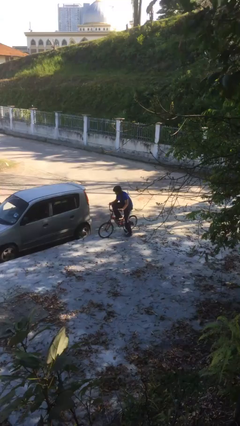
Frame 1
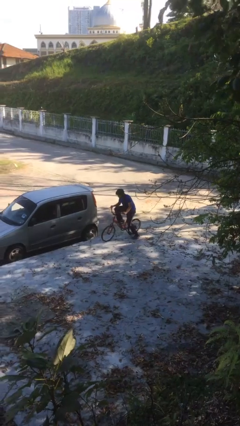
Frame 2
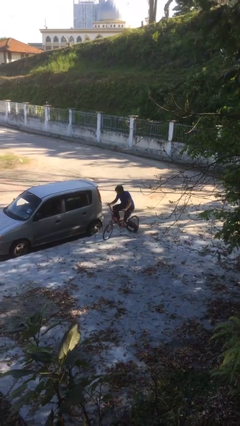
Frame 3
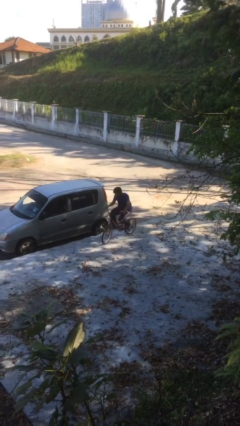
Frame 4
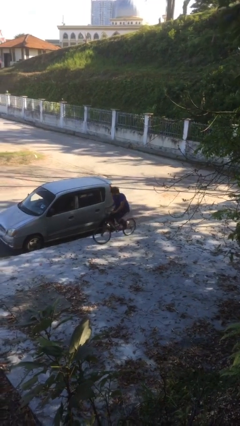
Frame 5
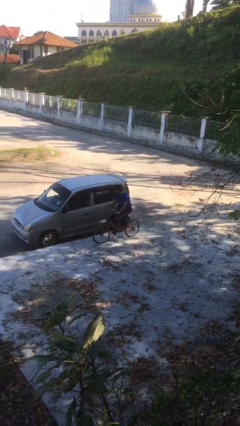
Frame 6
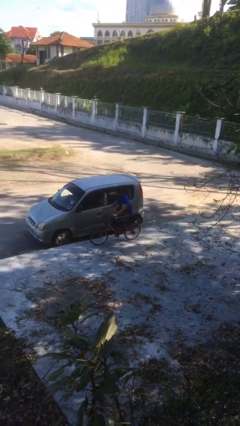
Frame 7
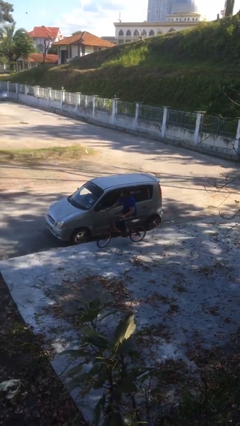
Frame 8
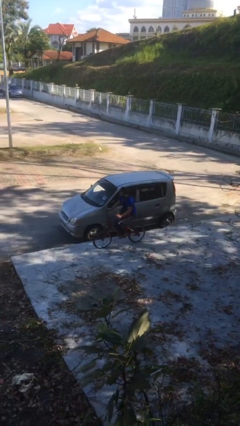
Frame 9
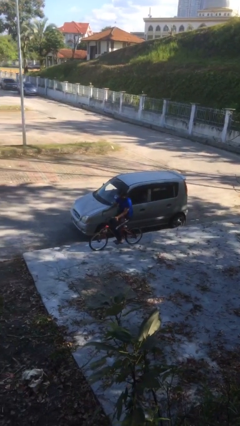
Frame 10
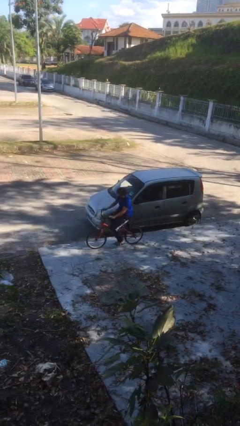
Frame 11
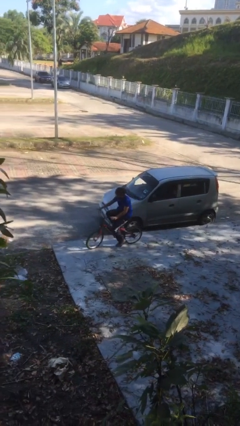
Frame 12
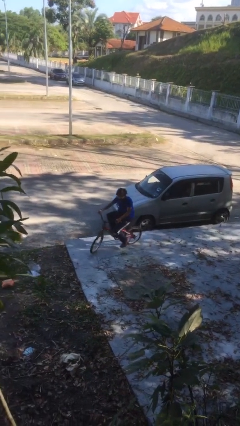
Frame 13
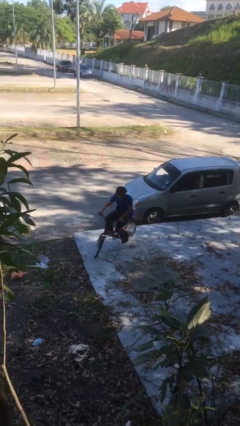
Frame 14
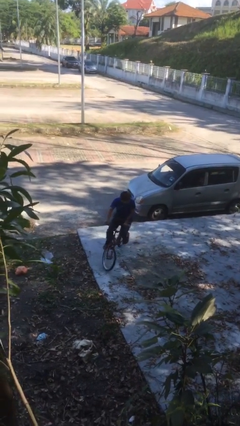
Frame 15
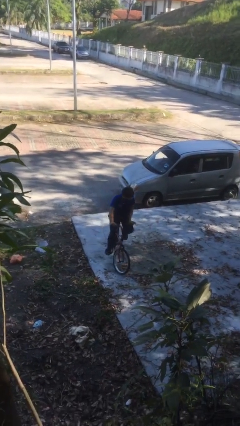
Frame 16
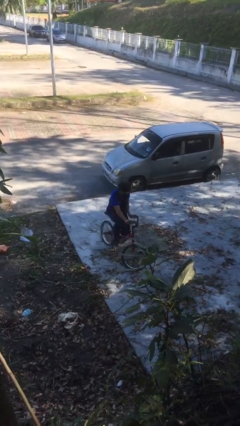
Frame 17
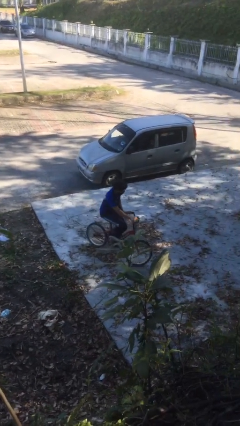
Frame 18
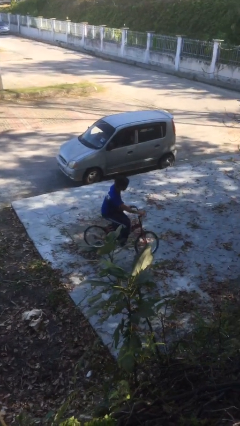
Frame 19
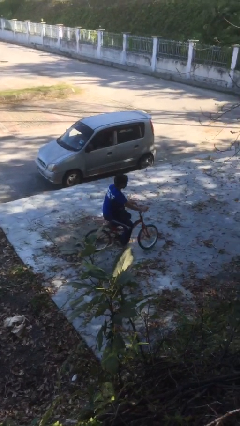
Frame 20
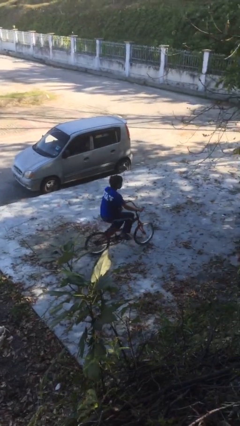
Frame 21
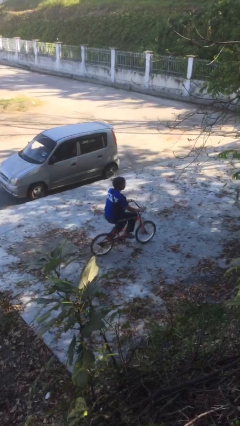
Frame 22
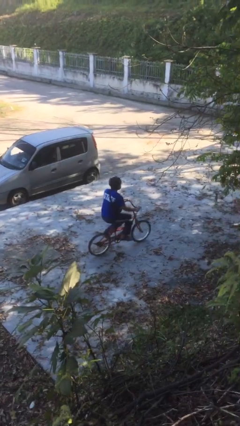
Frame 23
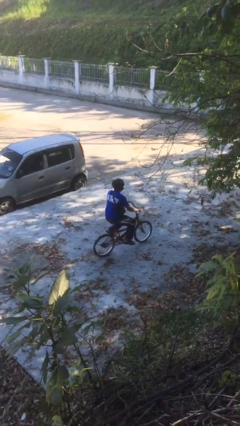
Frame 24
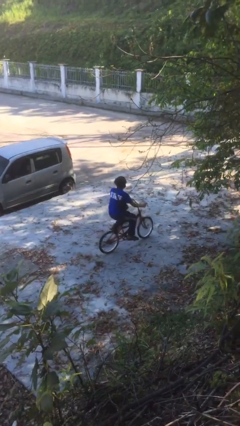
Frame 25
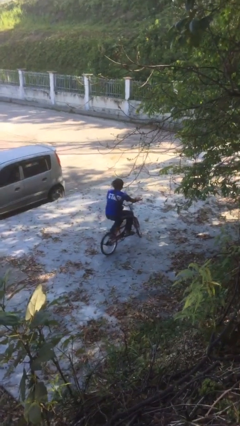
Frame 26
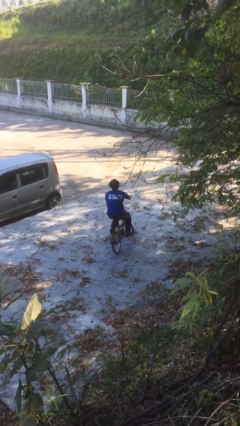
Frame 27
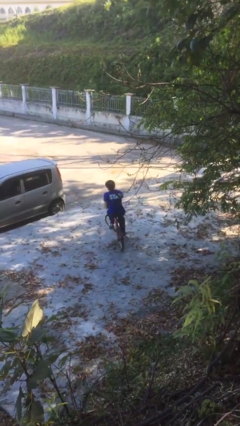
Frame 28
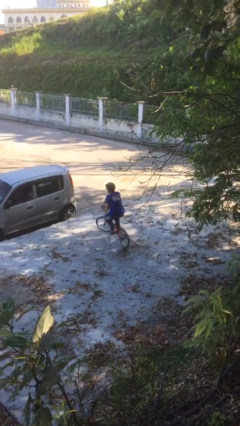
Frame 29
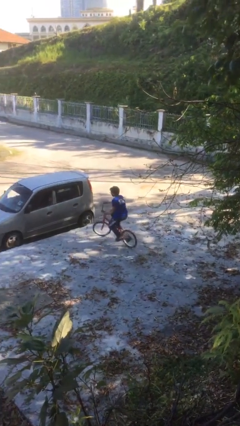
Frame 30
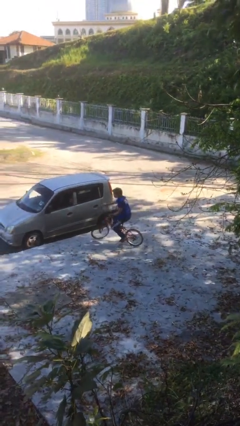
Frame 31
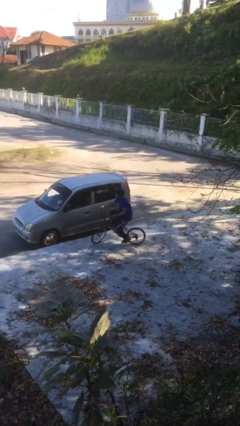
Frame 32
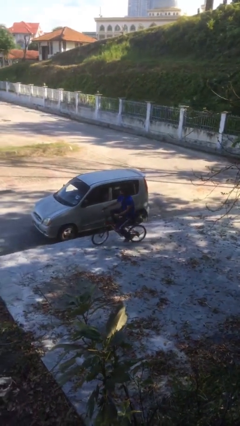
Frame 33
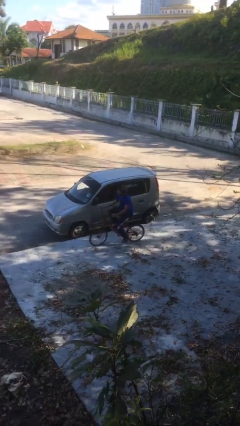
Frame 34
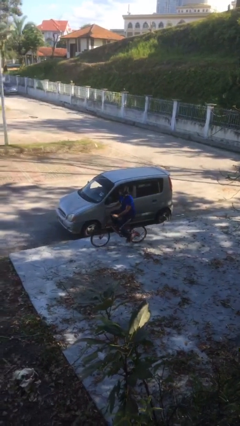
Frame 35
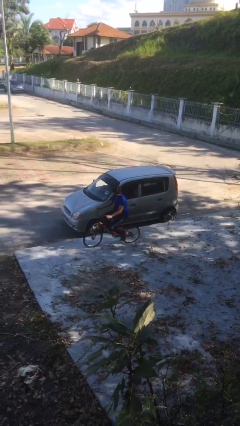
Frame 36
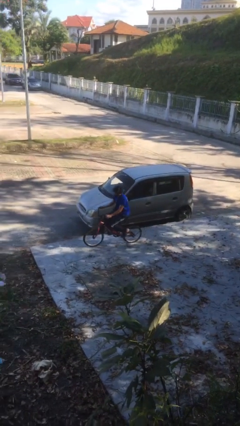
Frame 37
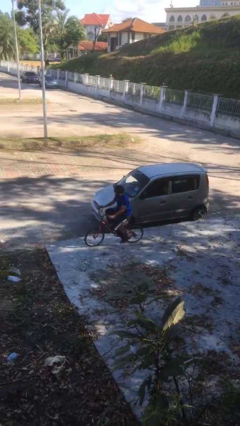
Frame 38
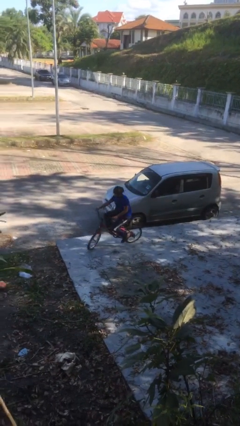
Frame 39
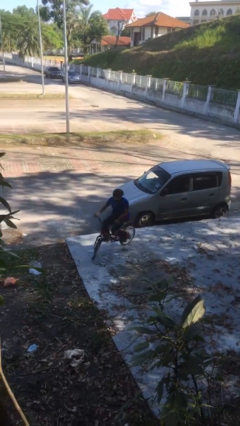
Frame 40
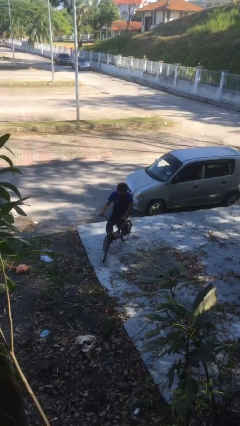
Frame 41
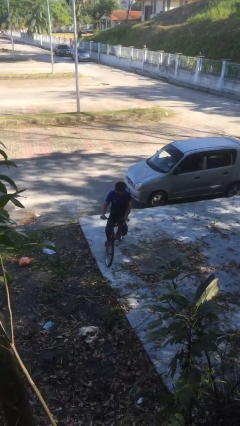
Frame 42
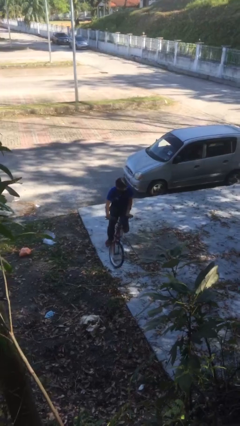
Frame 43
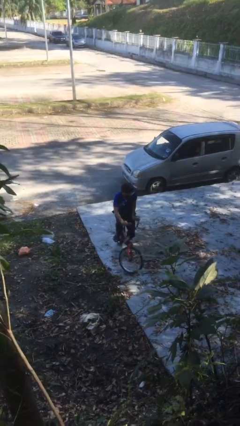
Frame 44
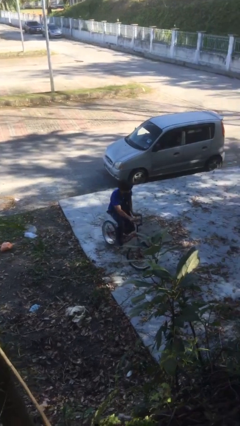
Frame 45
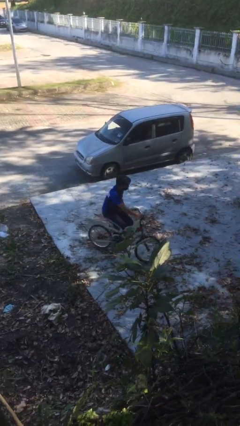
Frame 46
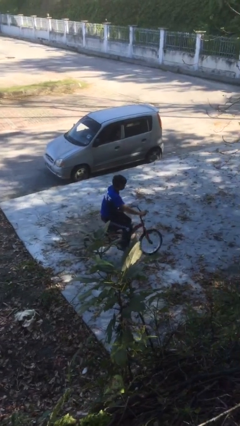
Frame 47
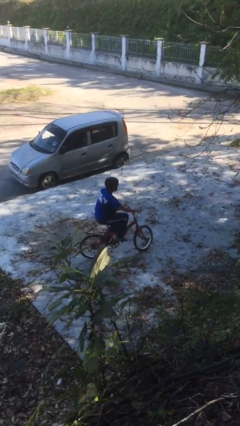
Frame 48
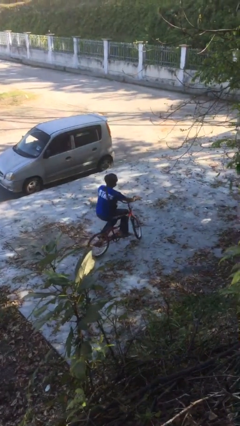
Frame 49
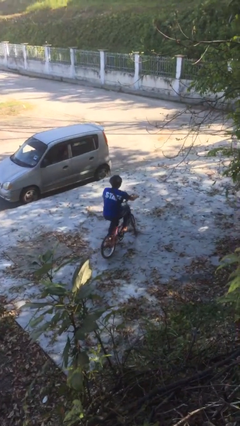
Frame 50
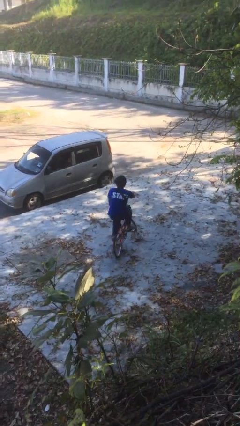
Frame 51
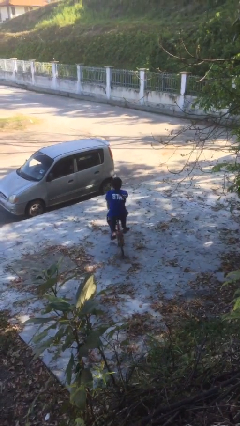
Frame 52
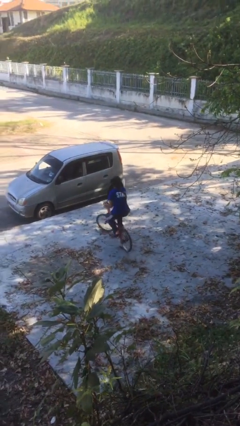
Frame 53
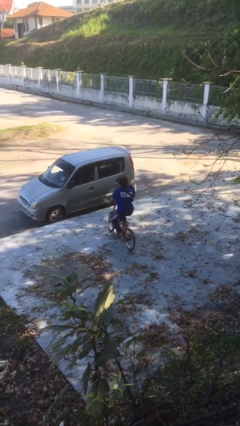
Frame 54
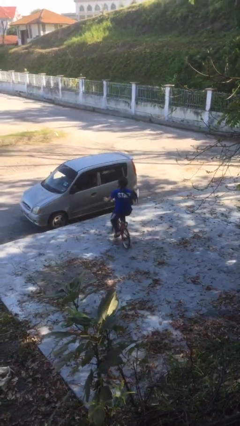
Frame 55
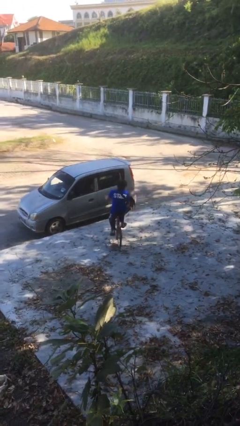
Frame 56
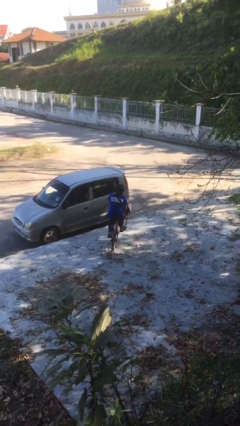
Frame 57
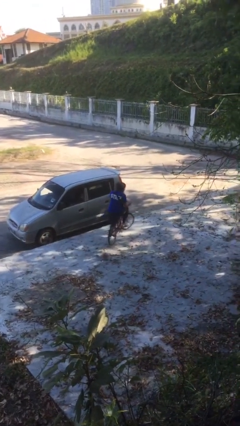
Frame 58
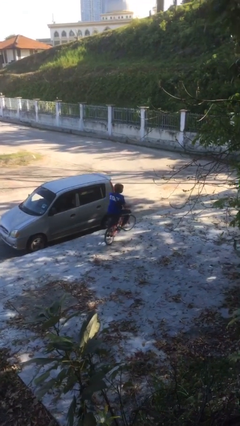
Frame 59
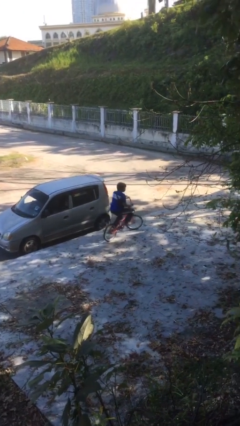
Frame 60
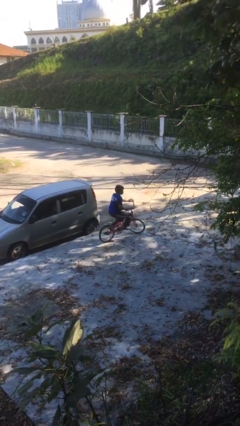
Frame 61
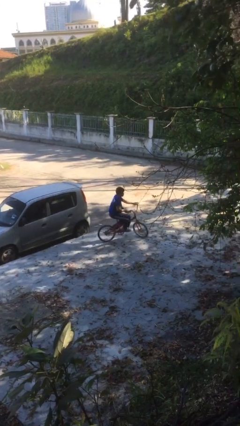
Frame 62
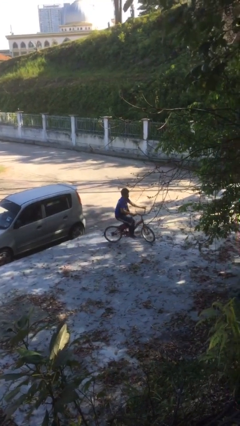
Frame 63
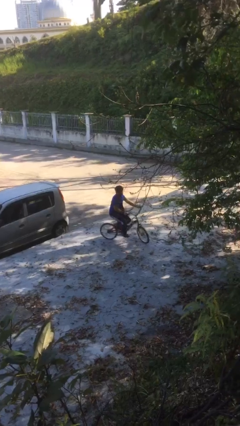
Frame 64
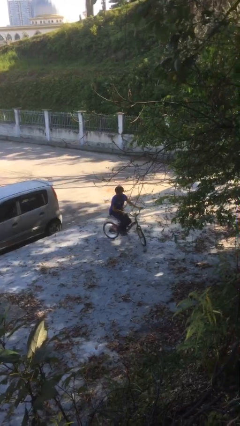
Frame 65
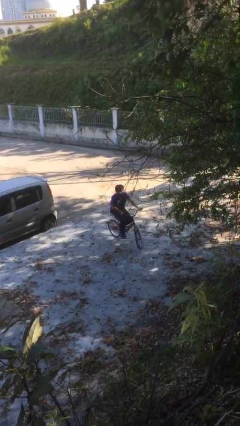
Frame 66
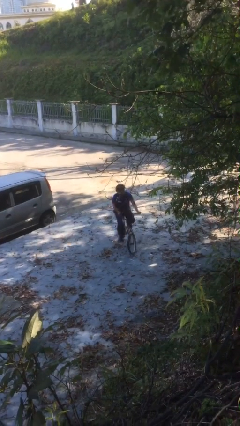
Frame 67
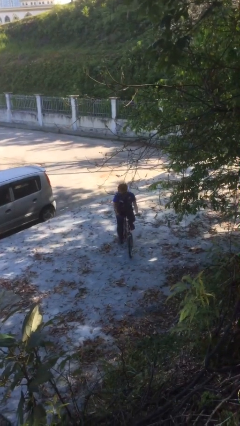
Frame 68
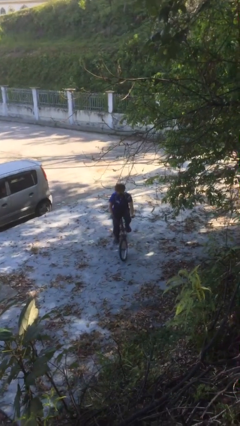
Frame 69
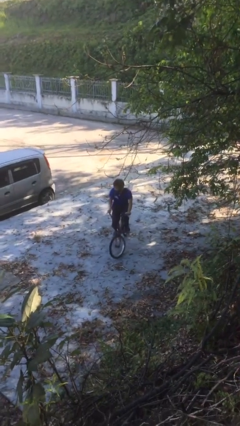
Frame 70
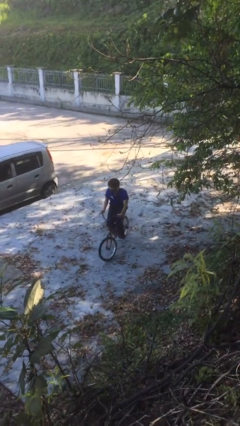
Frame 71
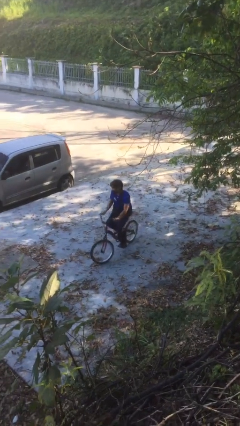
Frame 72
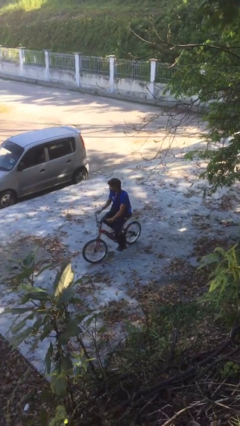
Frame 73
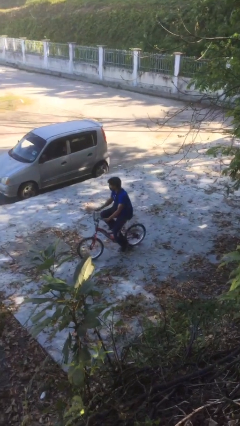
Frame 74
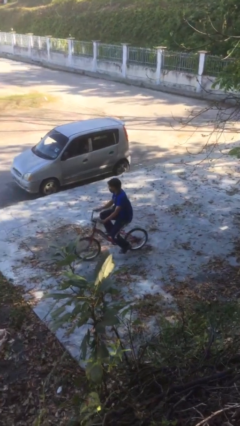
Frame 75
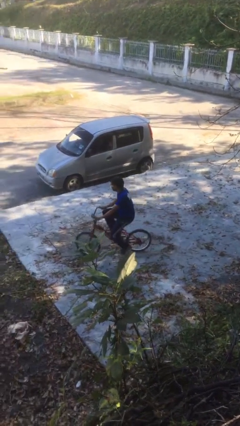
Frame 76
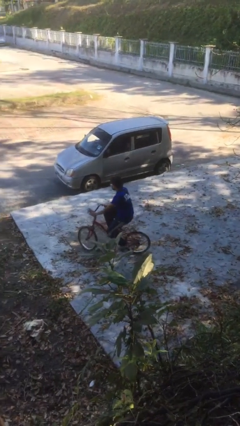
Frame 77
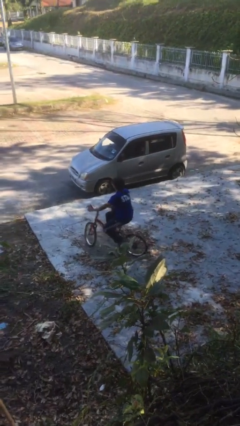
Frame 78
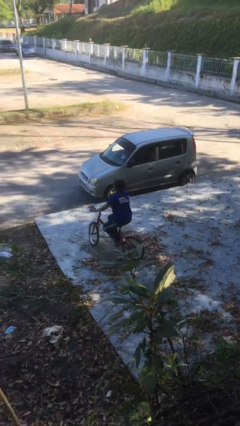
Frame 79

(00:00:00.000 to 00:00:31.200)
person rides bicycle

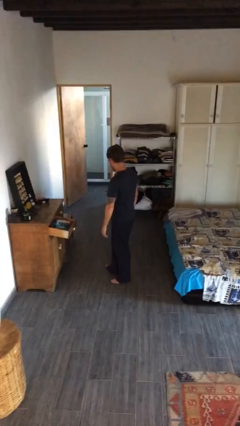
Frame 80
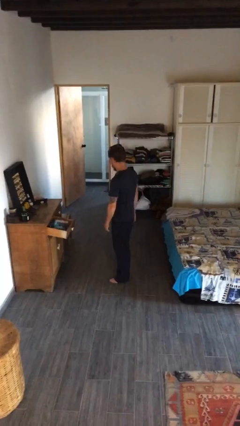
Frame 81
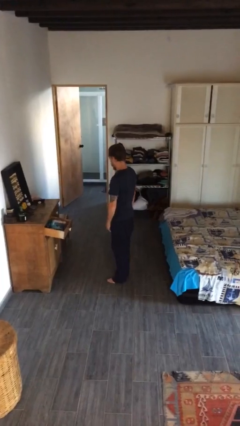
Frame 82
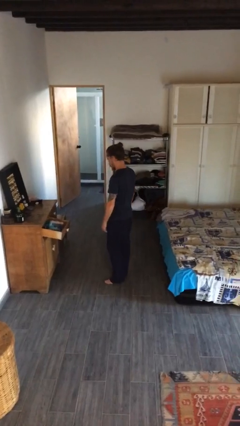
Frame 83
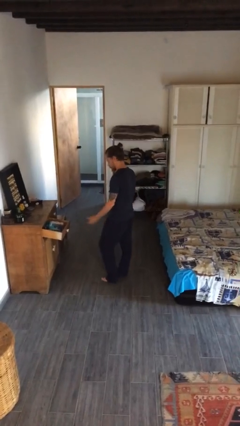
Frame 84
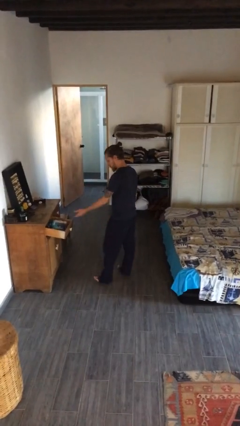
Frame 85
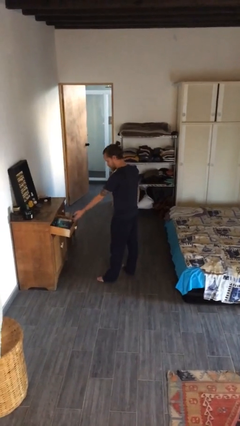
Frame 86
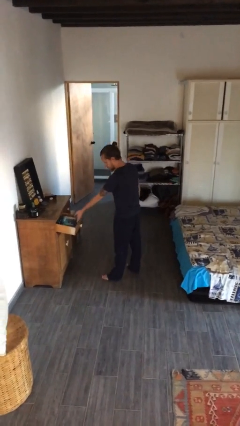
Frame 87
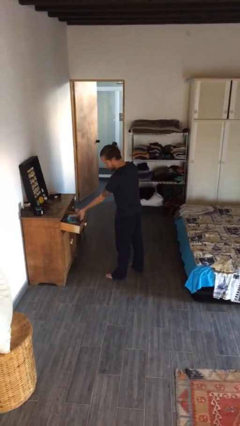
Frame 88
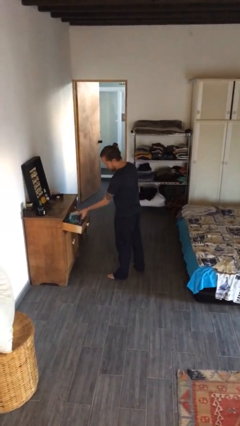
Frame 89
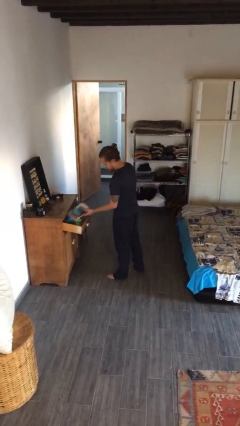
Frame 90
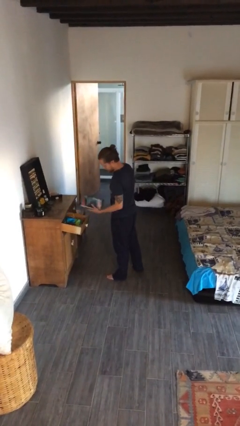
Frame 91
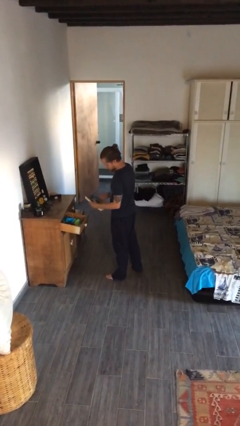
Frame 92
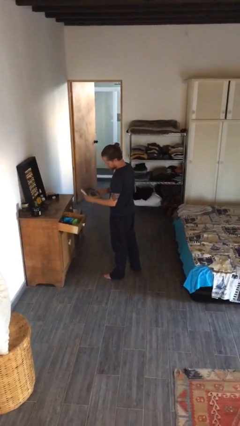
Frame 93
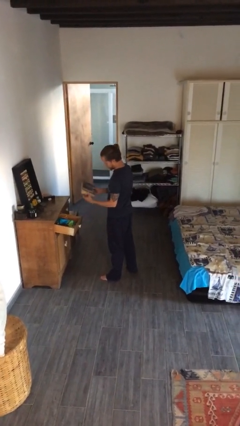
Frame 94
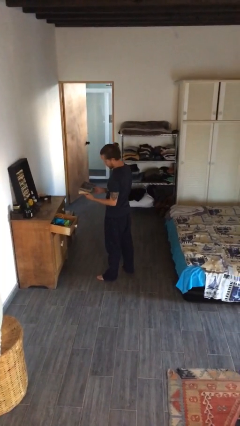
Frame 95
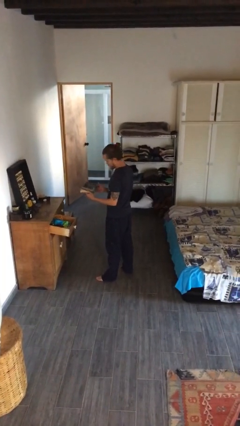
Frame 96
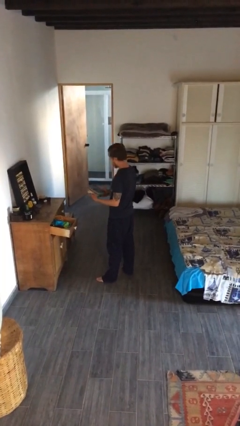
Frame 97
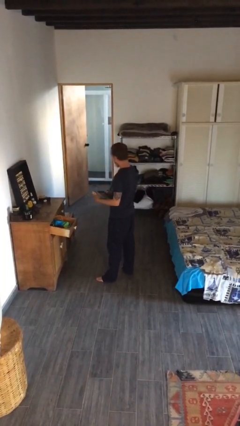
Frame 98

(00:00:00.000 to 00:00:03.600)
person picks up object from cabinet
